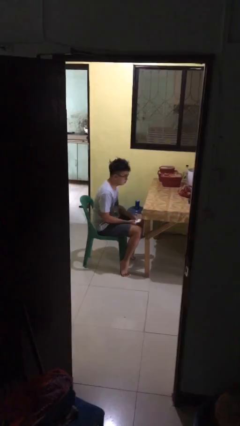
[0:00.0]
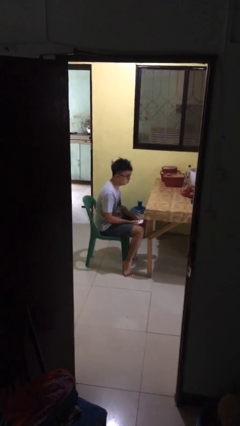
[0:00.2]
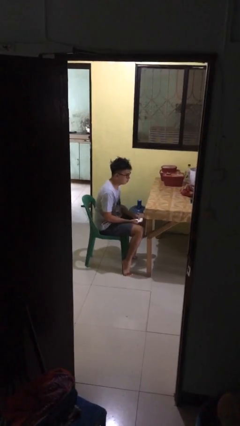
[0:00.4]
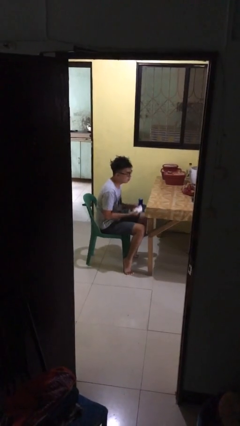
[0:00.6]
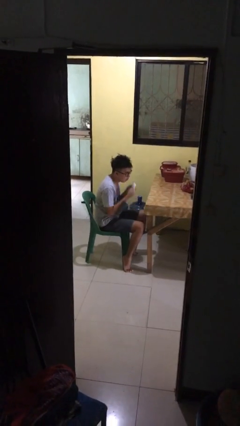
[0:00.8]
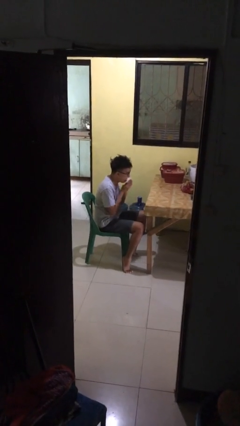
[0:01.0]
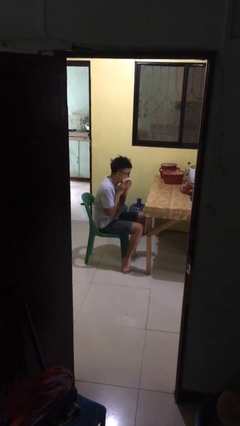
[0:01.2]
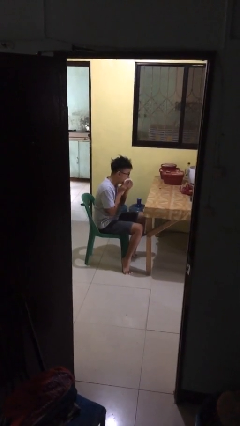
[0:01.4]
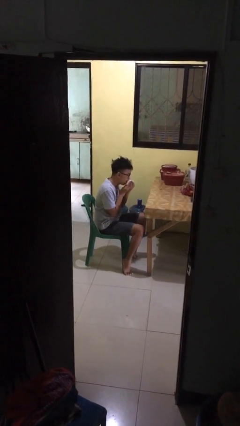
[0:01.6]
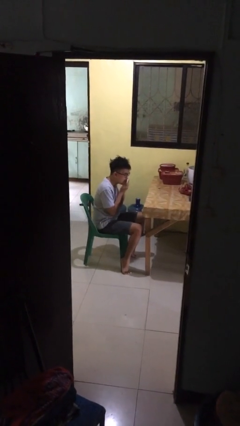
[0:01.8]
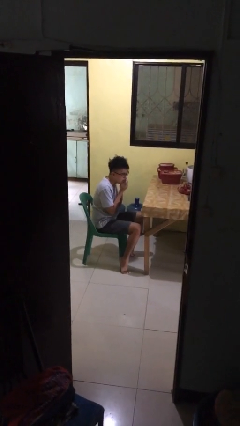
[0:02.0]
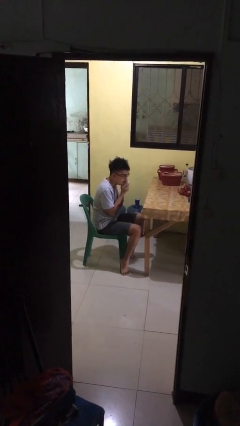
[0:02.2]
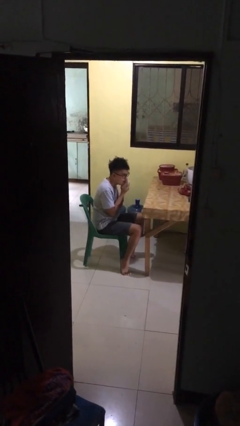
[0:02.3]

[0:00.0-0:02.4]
person wipes mouth with napkin

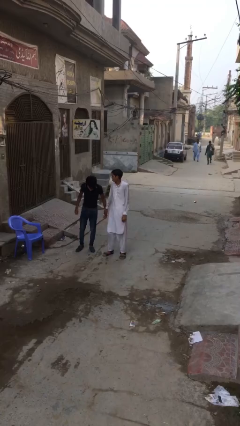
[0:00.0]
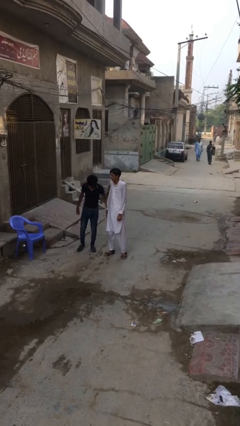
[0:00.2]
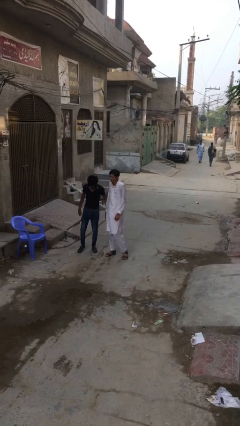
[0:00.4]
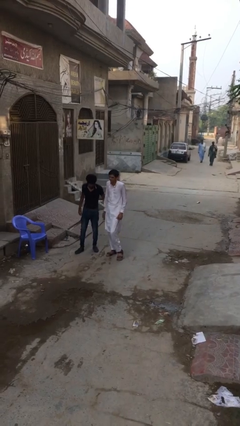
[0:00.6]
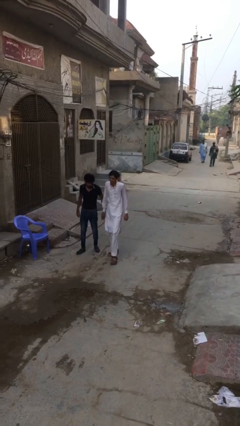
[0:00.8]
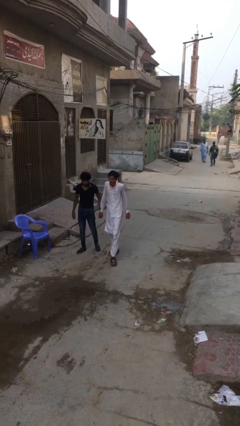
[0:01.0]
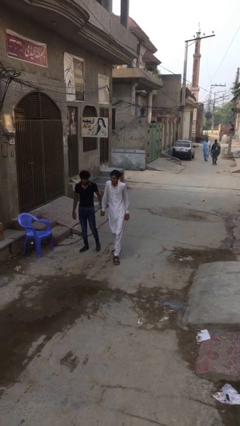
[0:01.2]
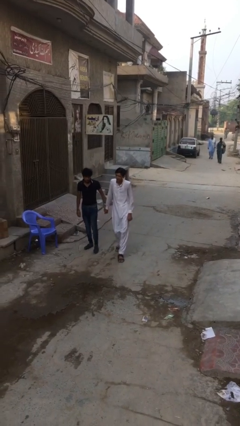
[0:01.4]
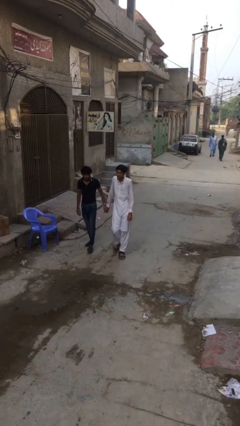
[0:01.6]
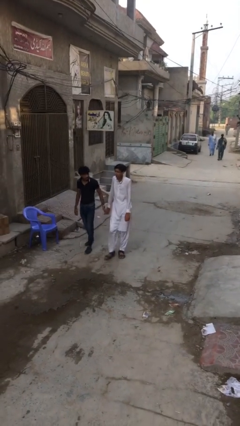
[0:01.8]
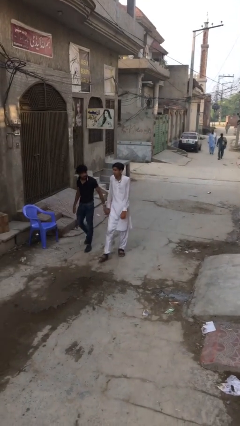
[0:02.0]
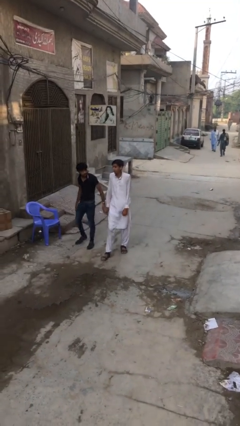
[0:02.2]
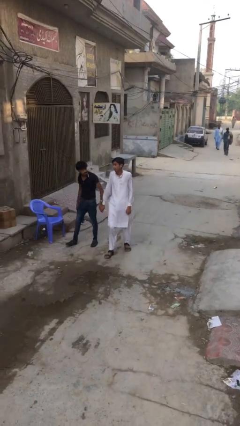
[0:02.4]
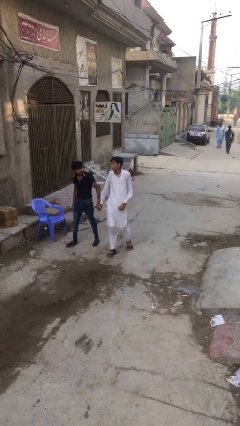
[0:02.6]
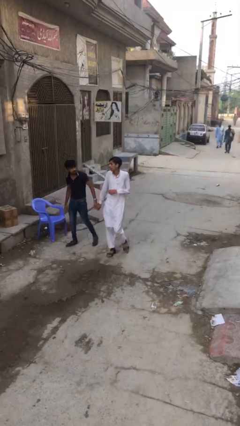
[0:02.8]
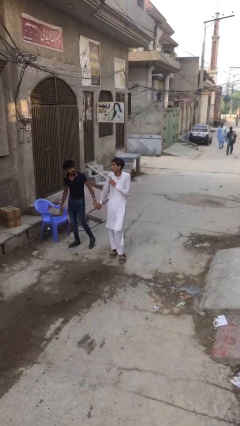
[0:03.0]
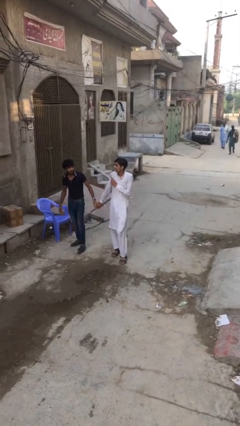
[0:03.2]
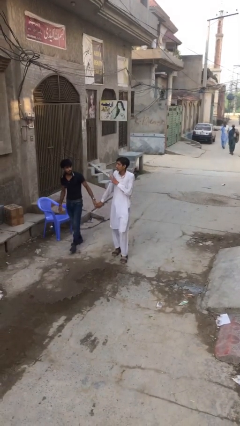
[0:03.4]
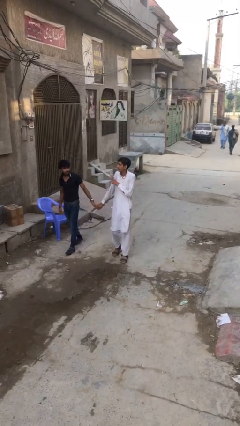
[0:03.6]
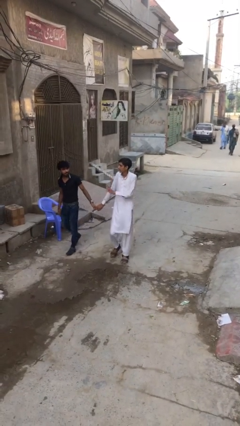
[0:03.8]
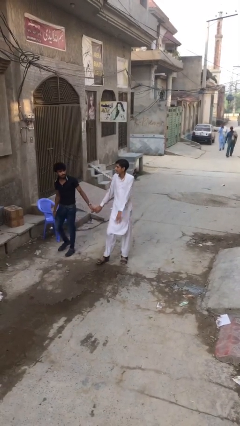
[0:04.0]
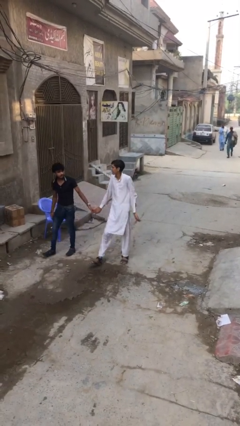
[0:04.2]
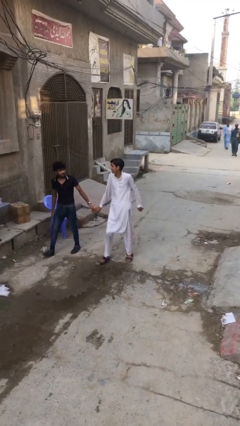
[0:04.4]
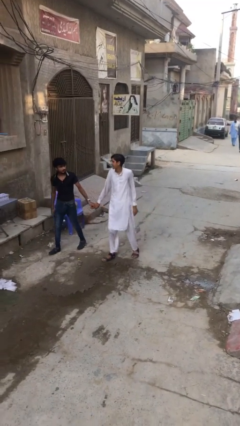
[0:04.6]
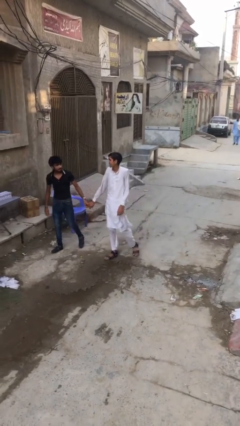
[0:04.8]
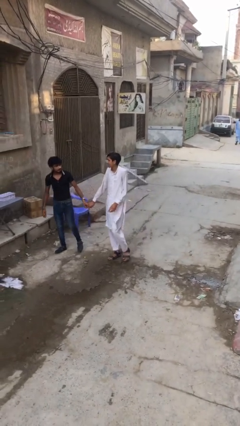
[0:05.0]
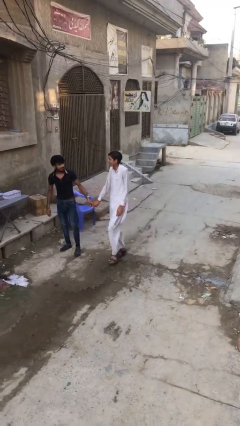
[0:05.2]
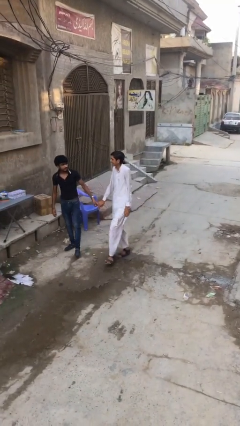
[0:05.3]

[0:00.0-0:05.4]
person holds hand

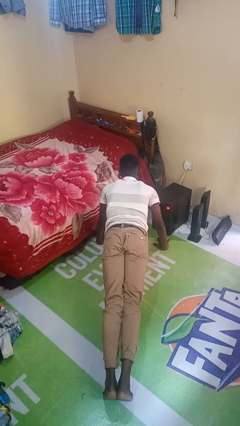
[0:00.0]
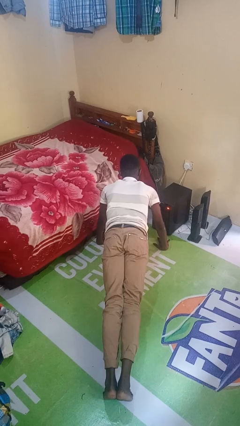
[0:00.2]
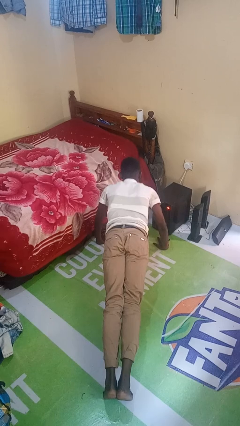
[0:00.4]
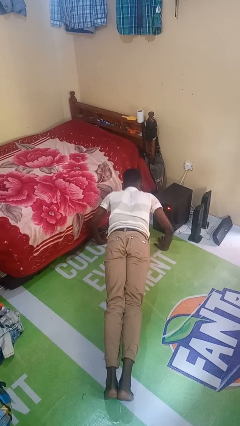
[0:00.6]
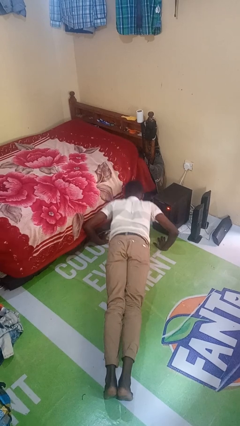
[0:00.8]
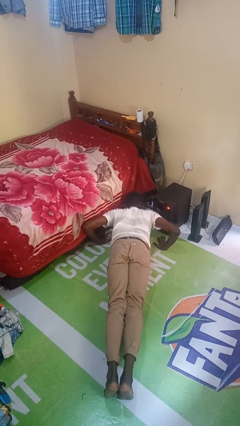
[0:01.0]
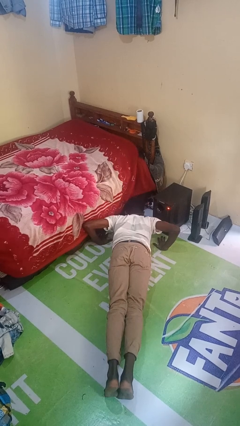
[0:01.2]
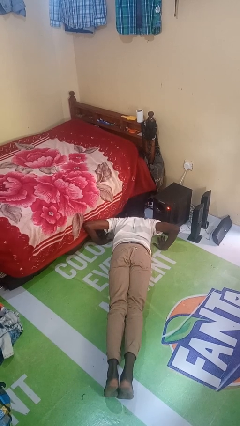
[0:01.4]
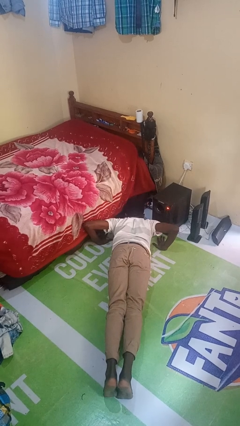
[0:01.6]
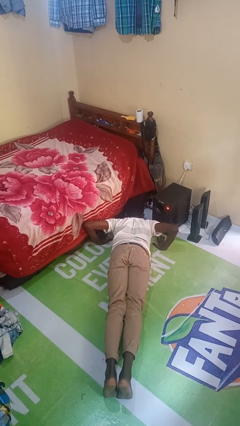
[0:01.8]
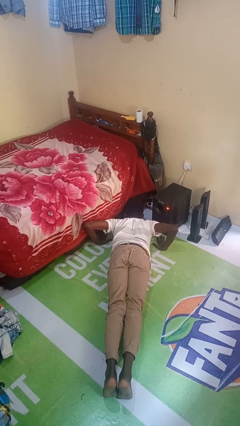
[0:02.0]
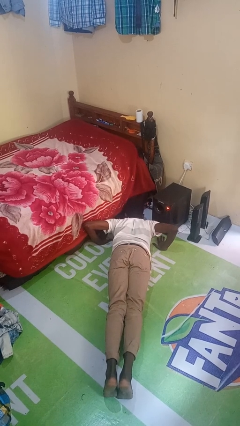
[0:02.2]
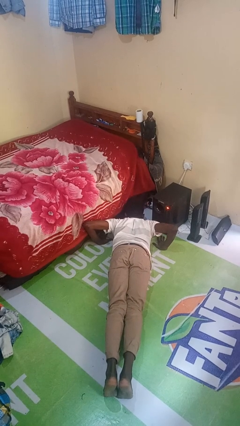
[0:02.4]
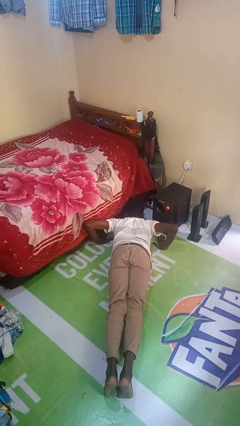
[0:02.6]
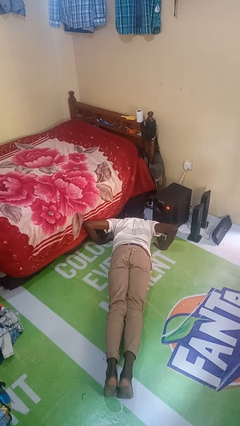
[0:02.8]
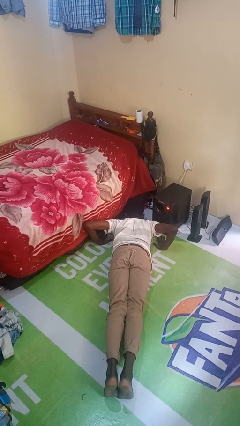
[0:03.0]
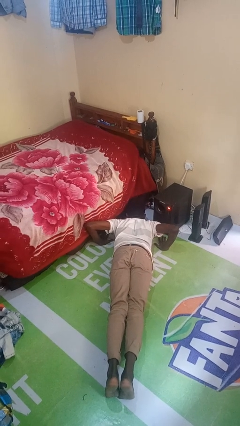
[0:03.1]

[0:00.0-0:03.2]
person exercises with pushup

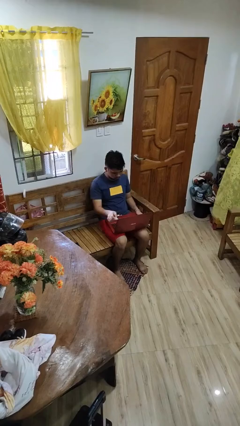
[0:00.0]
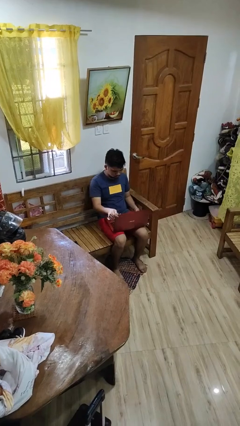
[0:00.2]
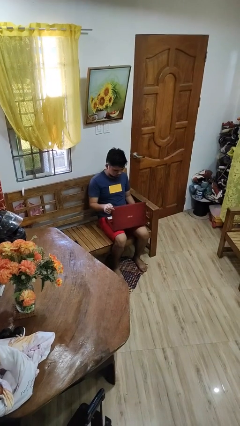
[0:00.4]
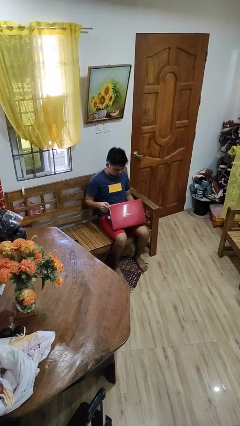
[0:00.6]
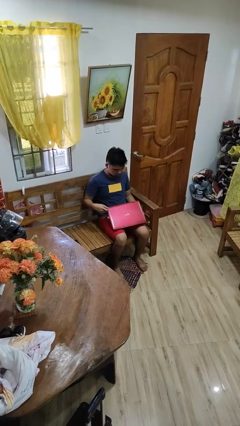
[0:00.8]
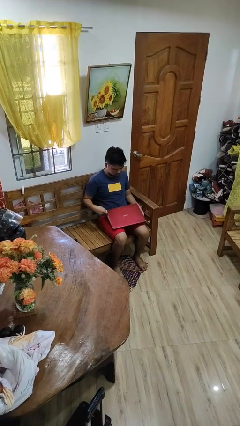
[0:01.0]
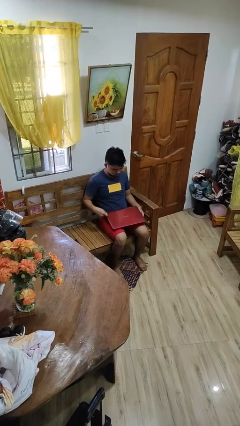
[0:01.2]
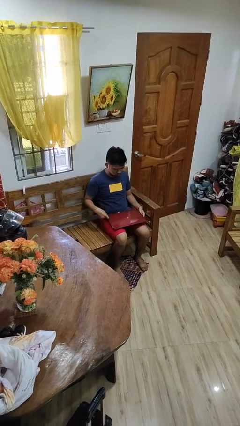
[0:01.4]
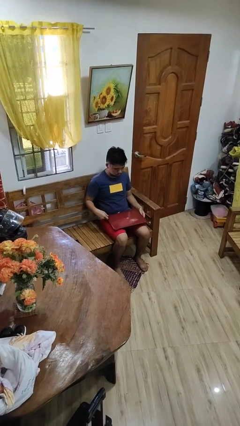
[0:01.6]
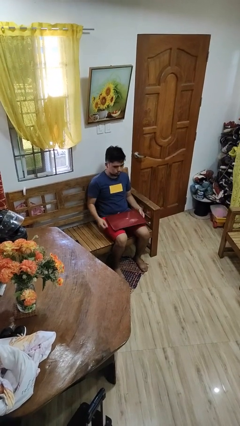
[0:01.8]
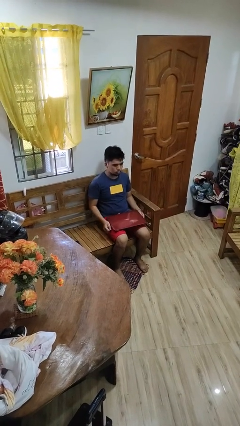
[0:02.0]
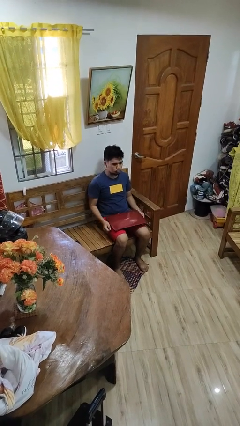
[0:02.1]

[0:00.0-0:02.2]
person closes laptop

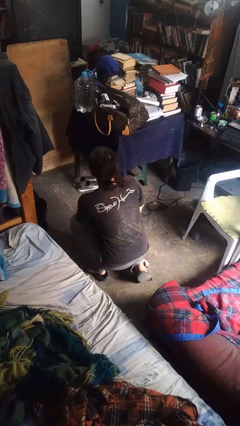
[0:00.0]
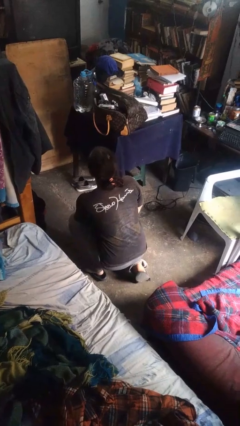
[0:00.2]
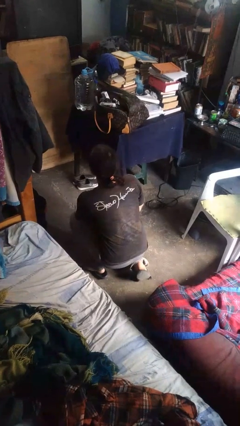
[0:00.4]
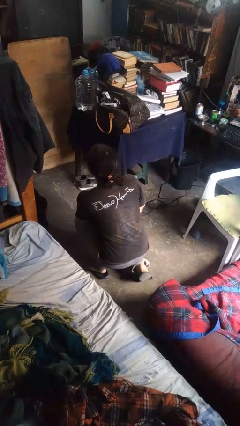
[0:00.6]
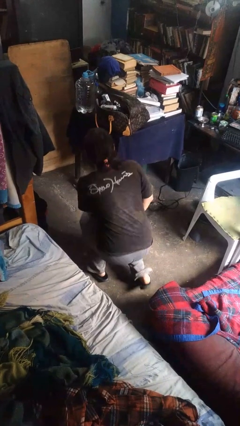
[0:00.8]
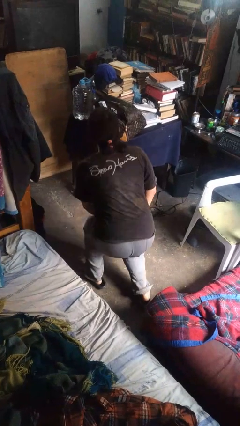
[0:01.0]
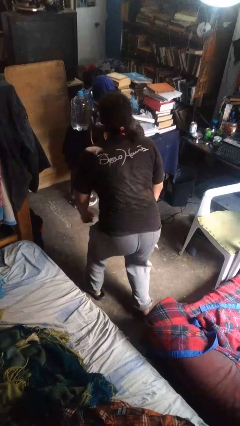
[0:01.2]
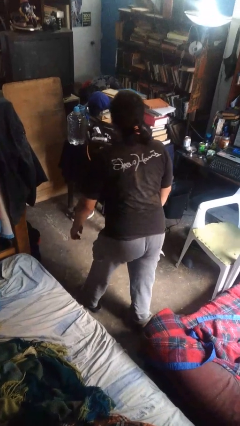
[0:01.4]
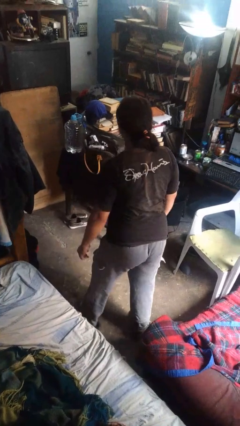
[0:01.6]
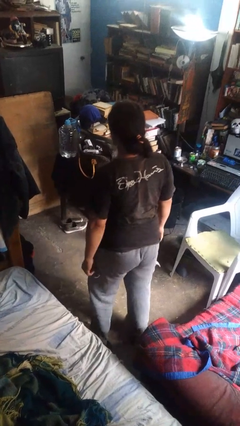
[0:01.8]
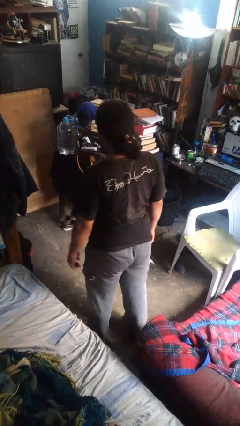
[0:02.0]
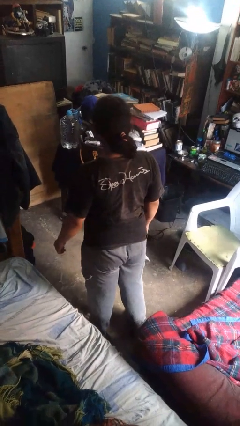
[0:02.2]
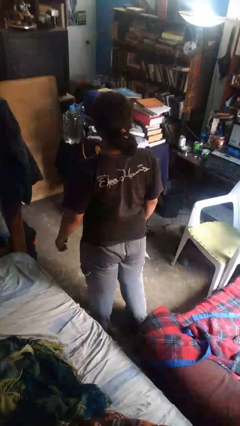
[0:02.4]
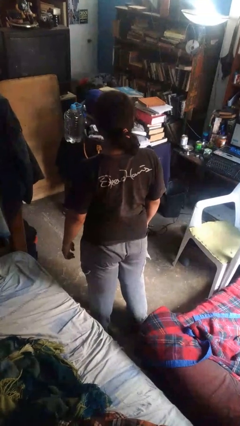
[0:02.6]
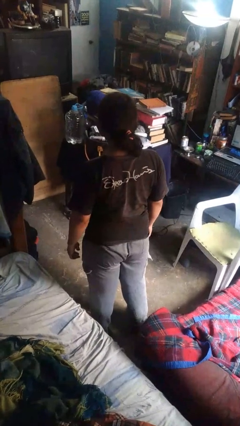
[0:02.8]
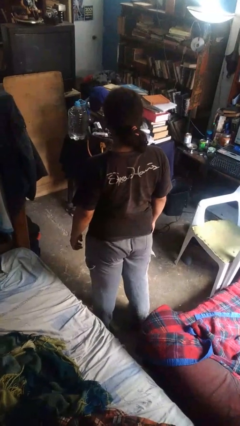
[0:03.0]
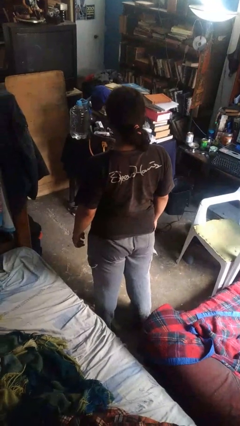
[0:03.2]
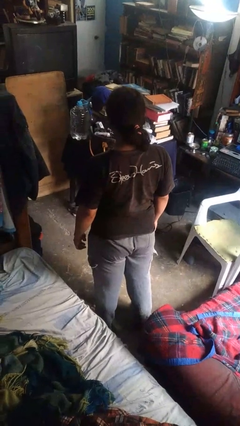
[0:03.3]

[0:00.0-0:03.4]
person stands up from floor

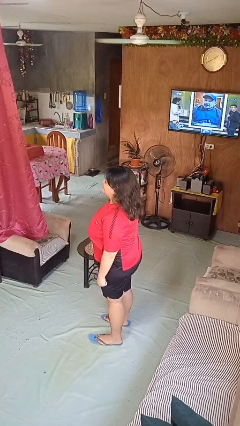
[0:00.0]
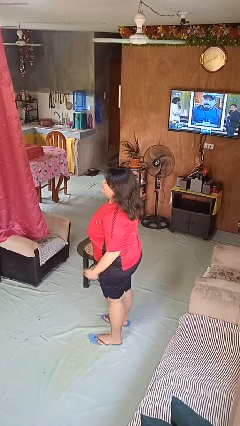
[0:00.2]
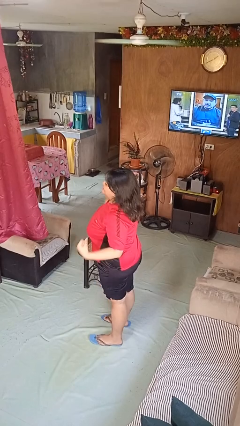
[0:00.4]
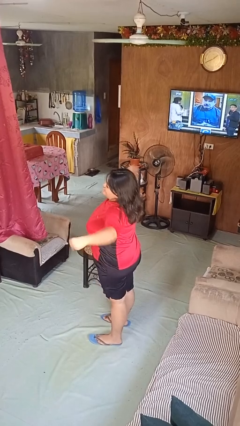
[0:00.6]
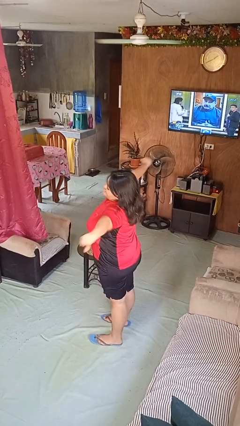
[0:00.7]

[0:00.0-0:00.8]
person stretches arms to side
